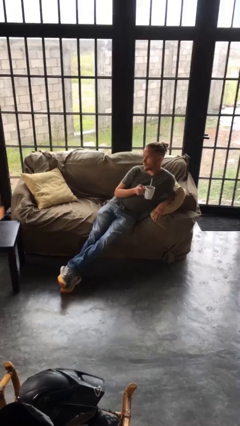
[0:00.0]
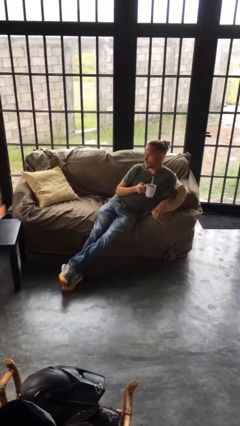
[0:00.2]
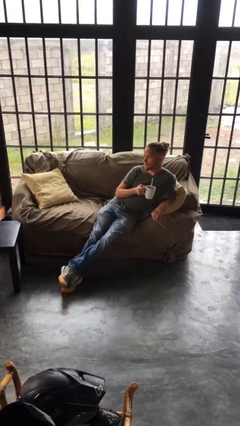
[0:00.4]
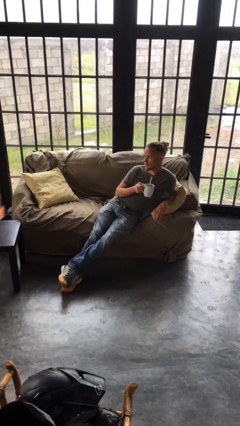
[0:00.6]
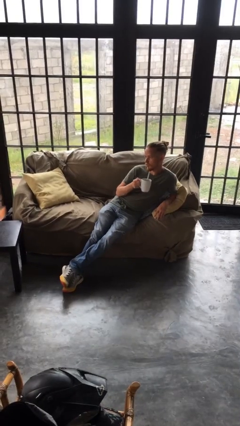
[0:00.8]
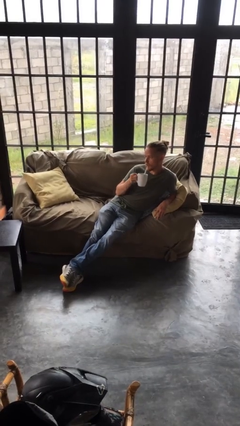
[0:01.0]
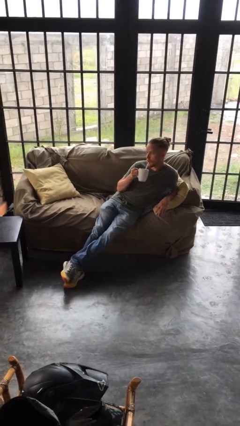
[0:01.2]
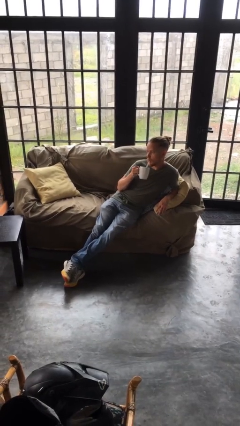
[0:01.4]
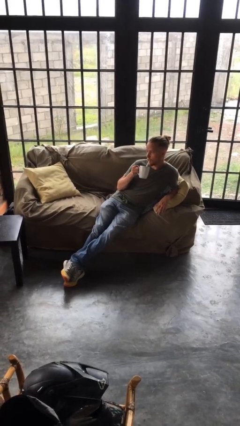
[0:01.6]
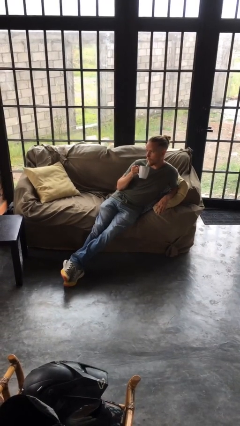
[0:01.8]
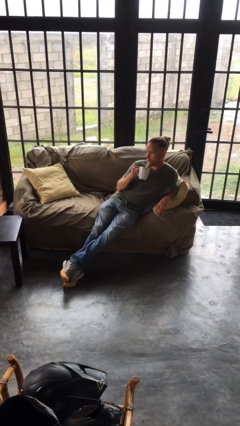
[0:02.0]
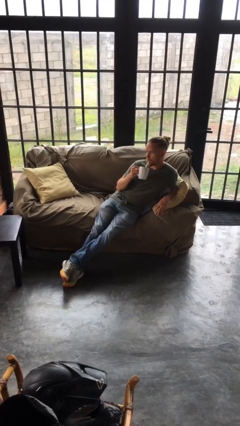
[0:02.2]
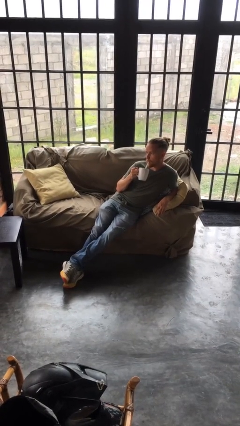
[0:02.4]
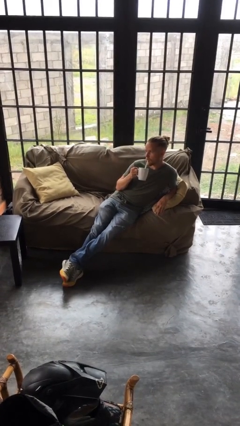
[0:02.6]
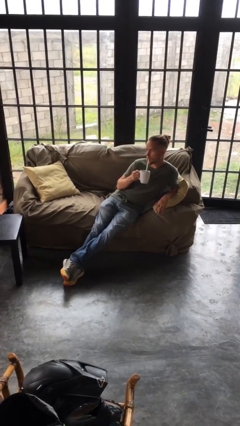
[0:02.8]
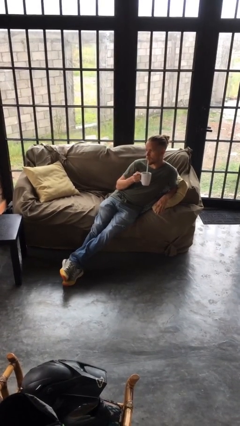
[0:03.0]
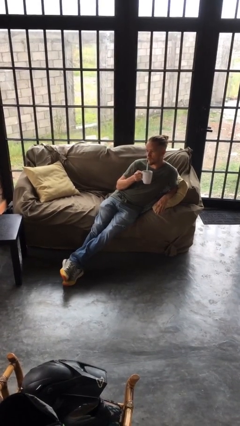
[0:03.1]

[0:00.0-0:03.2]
person drinks from straw

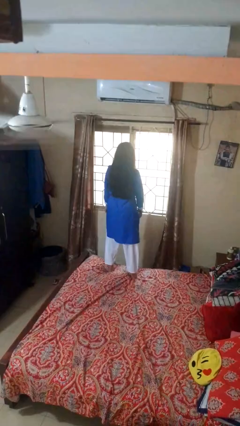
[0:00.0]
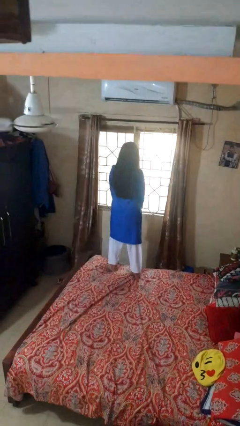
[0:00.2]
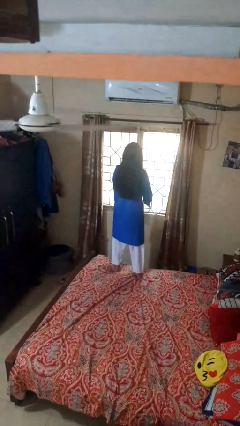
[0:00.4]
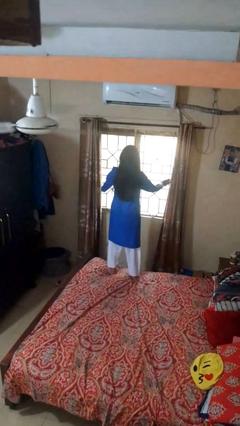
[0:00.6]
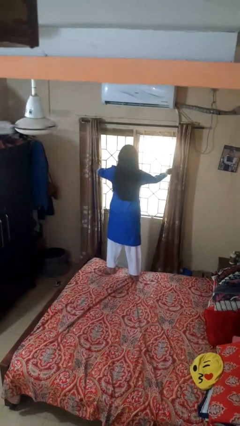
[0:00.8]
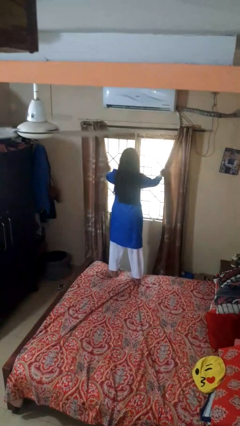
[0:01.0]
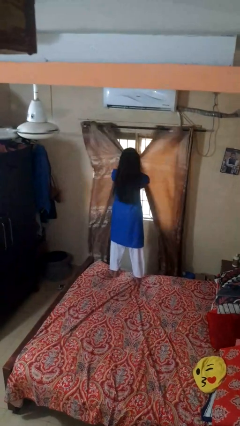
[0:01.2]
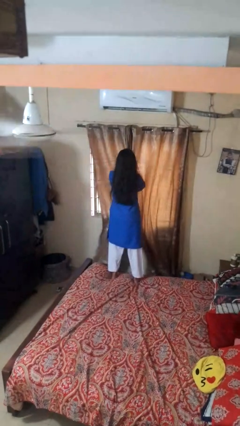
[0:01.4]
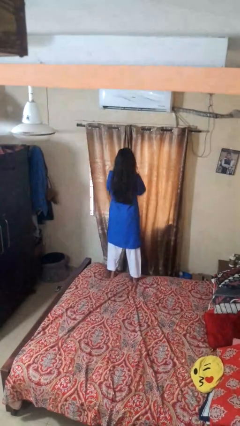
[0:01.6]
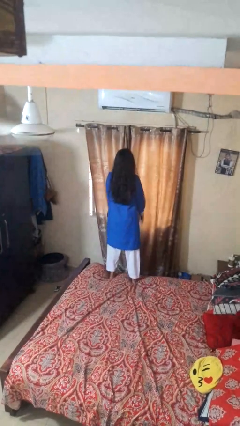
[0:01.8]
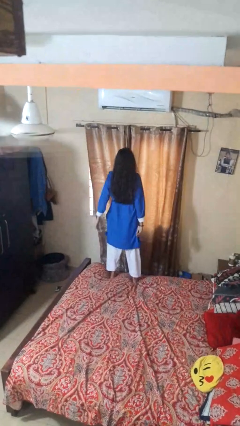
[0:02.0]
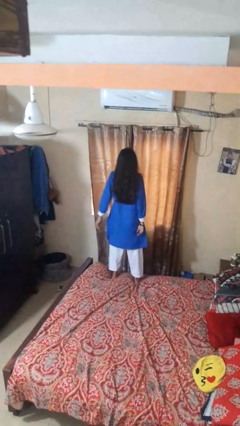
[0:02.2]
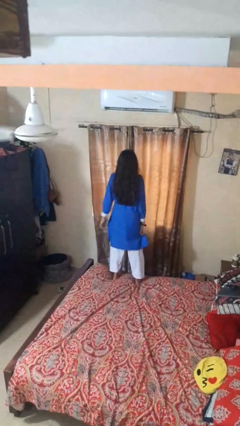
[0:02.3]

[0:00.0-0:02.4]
person closes curtains

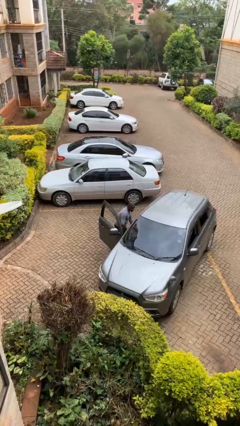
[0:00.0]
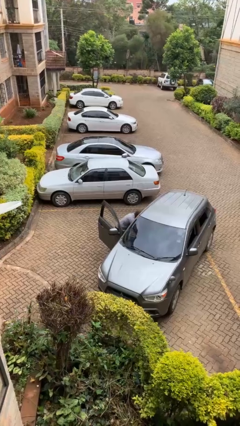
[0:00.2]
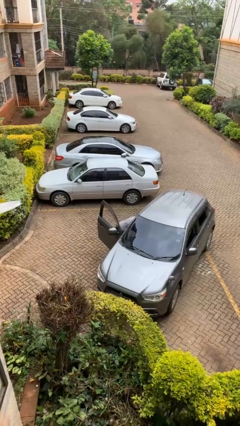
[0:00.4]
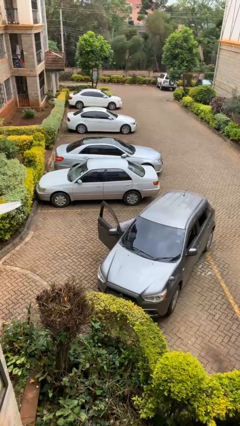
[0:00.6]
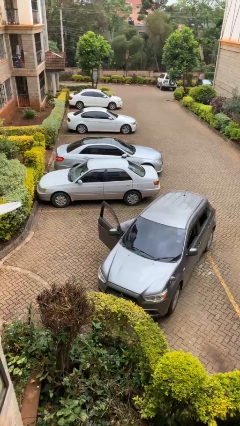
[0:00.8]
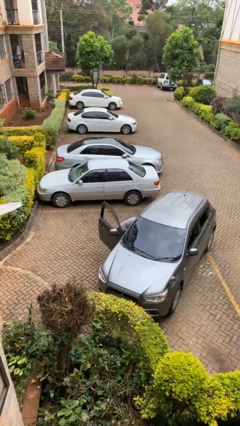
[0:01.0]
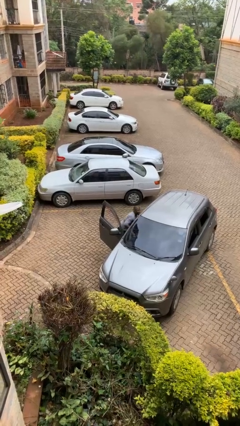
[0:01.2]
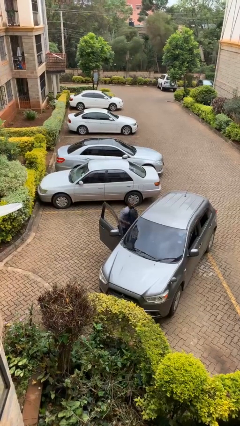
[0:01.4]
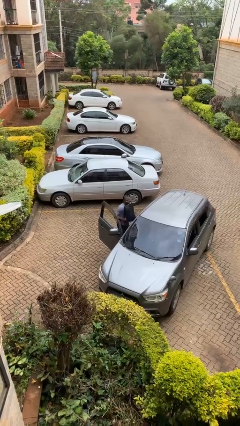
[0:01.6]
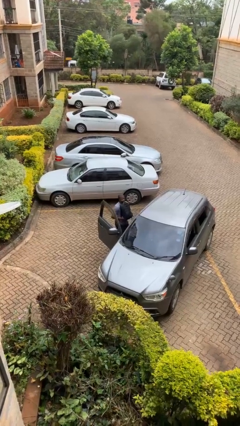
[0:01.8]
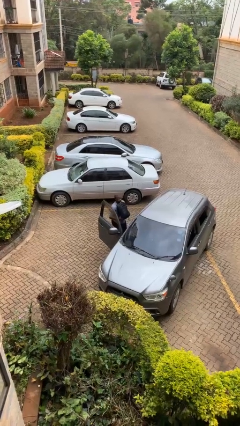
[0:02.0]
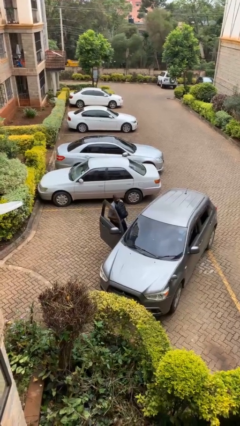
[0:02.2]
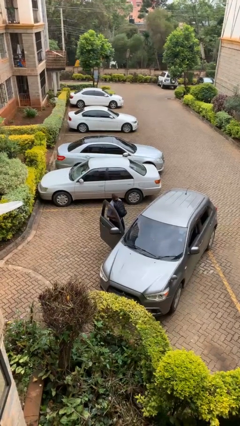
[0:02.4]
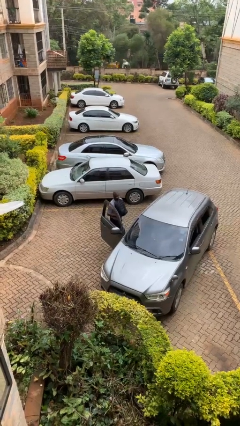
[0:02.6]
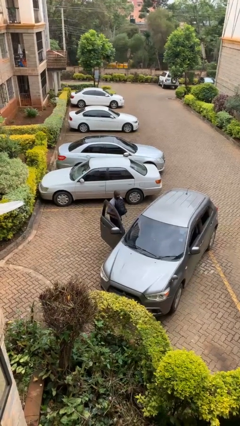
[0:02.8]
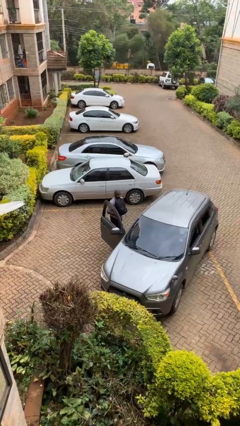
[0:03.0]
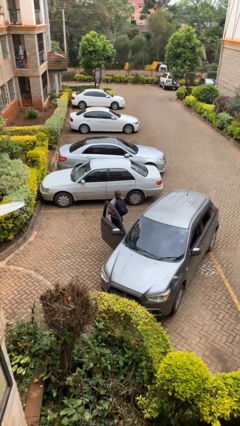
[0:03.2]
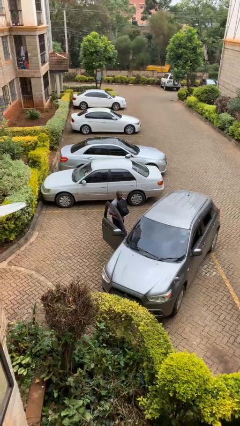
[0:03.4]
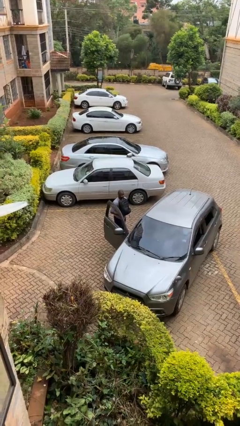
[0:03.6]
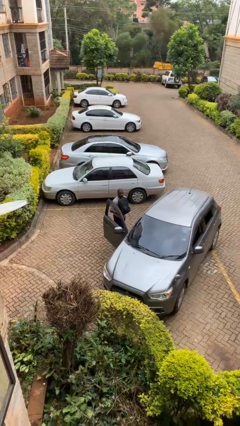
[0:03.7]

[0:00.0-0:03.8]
person unloads car

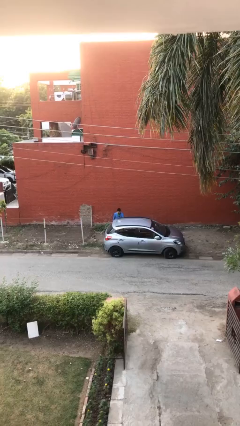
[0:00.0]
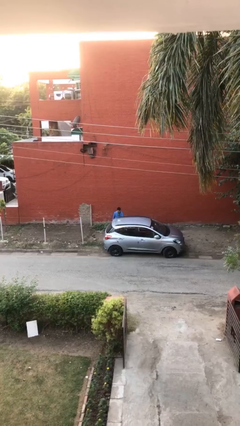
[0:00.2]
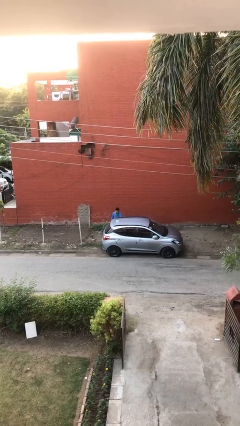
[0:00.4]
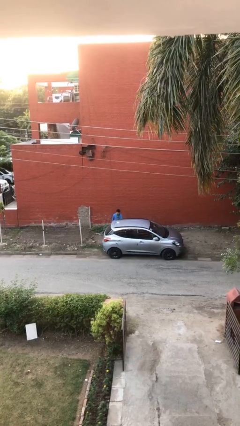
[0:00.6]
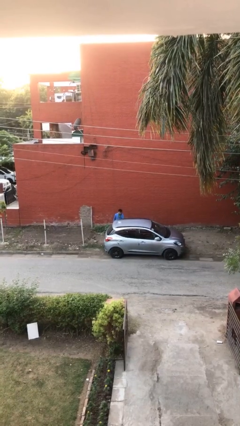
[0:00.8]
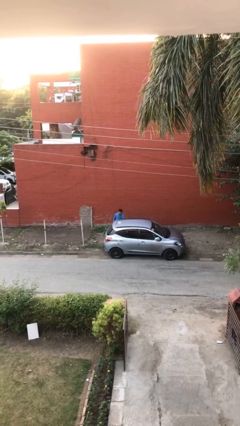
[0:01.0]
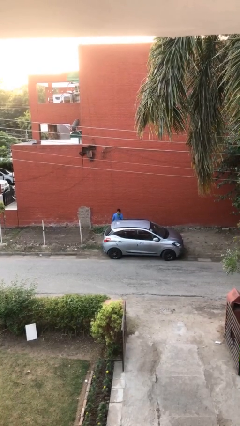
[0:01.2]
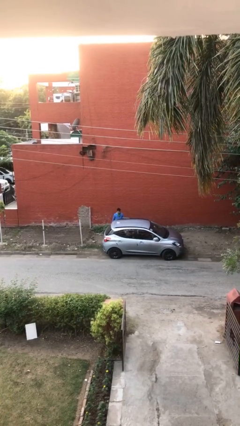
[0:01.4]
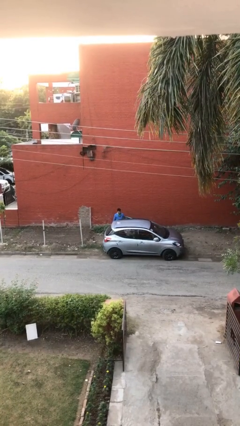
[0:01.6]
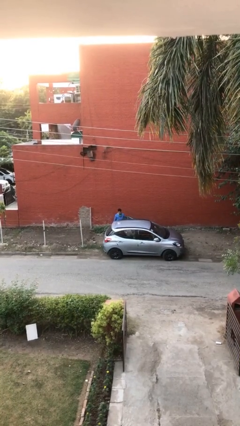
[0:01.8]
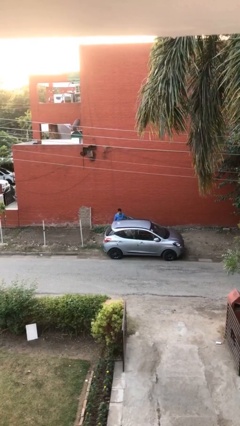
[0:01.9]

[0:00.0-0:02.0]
person opens car door

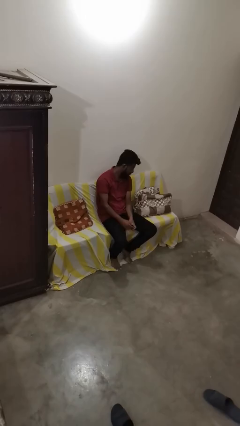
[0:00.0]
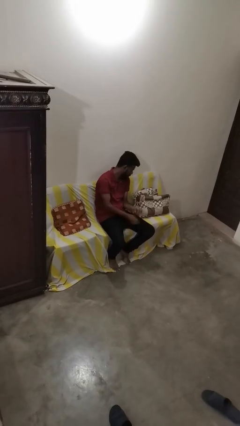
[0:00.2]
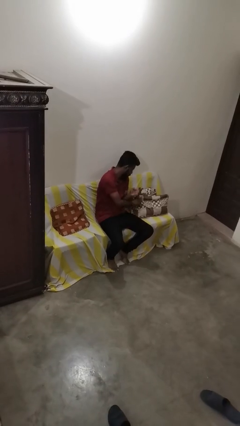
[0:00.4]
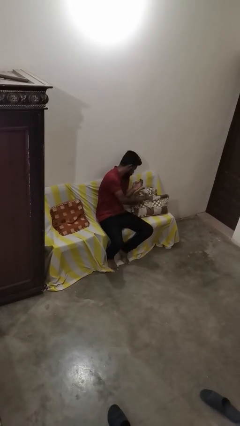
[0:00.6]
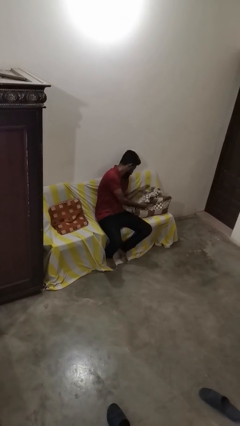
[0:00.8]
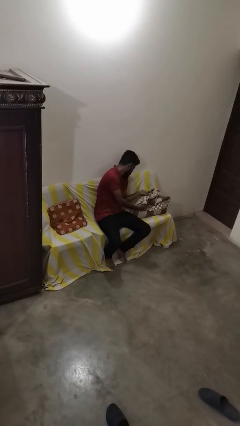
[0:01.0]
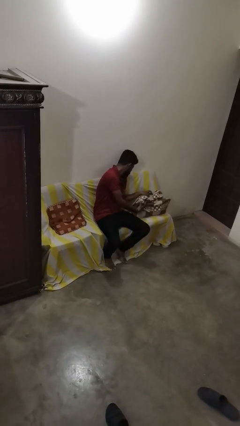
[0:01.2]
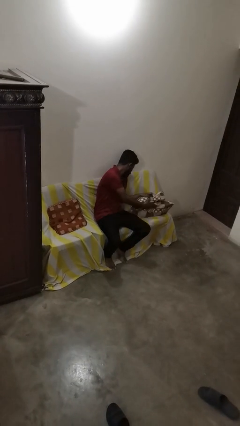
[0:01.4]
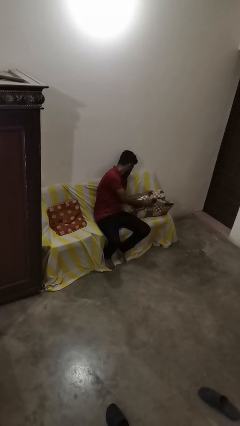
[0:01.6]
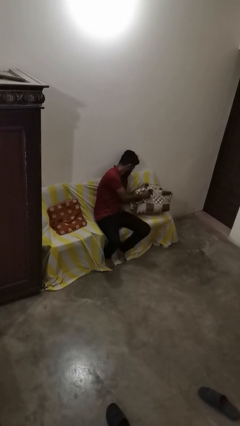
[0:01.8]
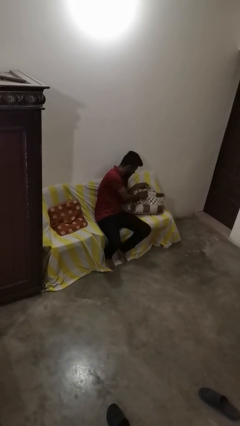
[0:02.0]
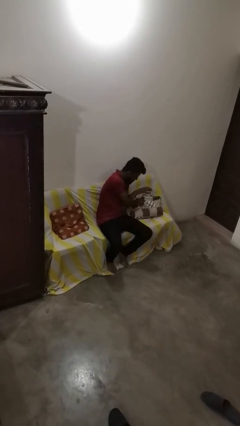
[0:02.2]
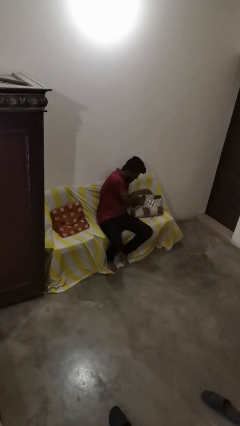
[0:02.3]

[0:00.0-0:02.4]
person searches in couch

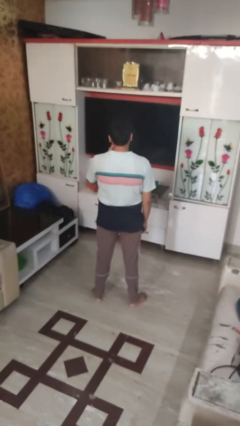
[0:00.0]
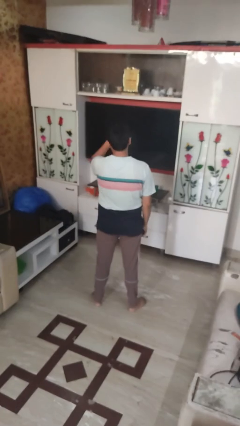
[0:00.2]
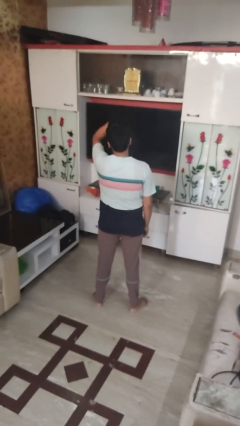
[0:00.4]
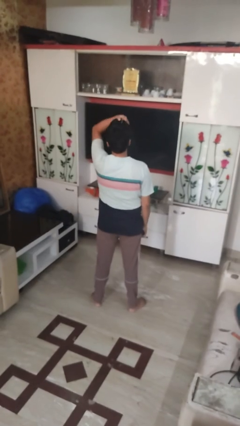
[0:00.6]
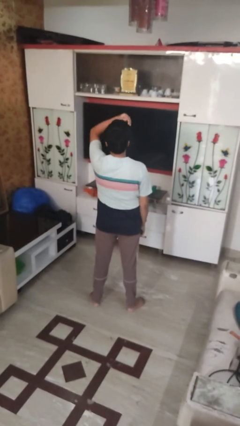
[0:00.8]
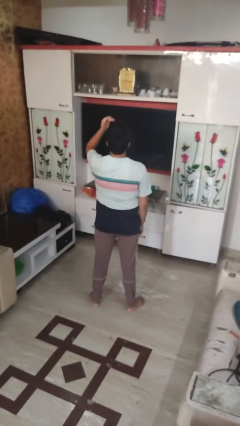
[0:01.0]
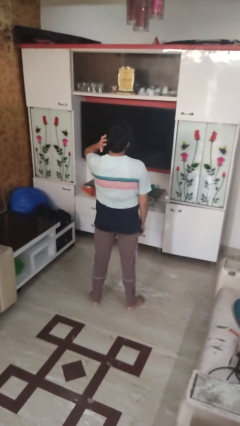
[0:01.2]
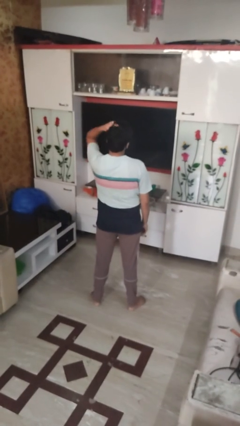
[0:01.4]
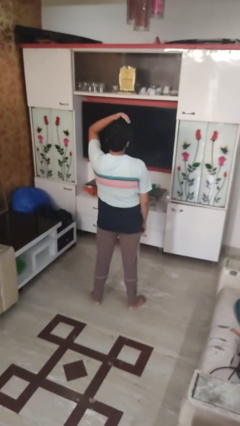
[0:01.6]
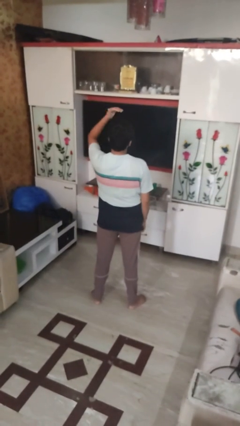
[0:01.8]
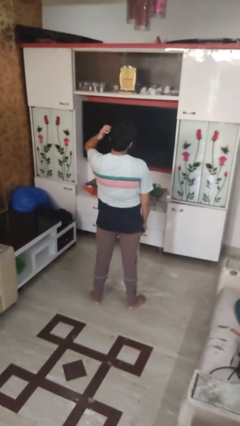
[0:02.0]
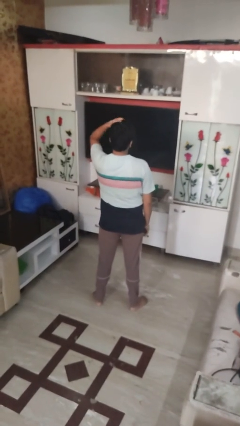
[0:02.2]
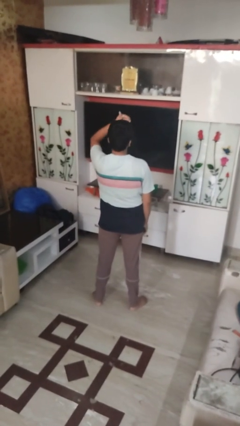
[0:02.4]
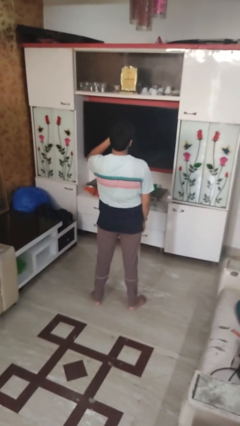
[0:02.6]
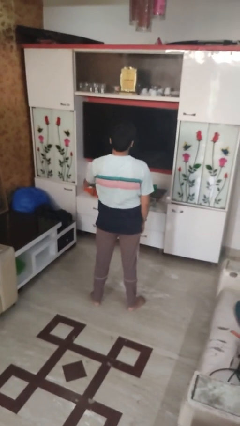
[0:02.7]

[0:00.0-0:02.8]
person strokes hair

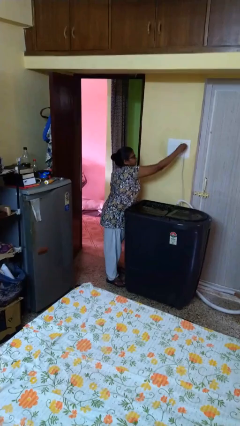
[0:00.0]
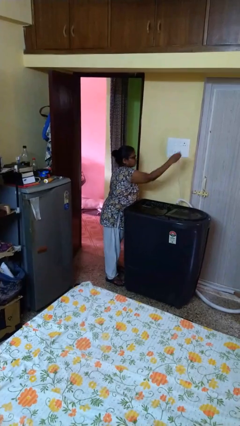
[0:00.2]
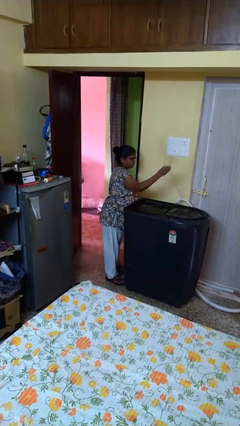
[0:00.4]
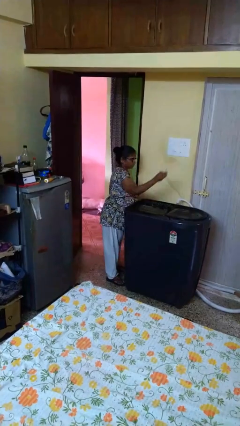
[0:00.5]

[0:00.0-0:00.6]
person unplugs from electrical socket

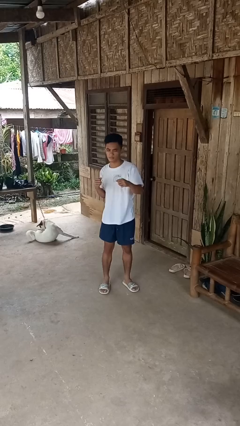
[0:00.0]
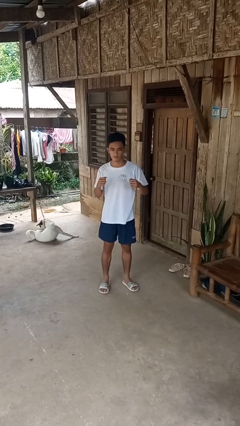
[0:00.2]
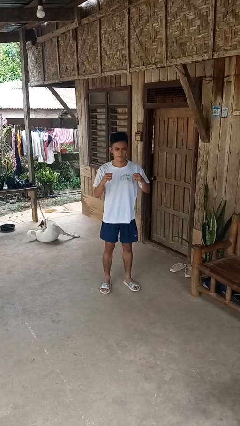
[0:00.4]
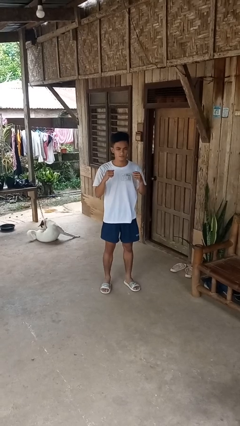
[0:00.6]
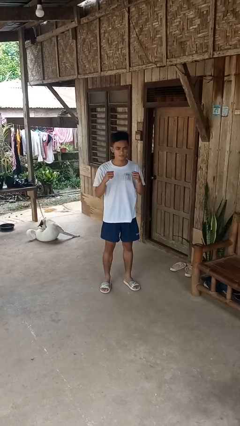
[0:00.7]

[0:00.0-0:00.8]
person punches